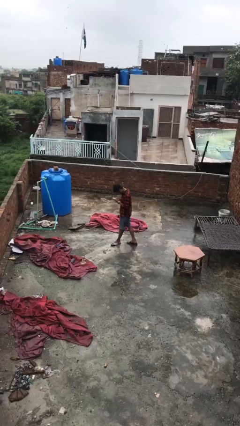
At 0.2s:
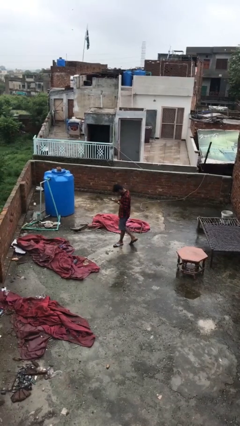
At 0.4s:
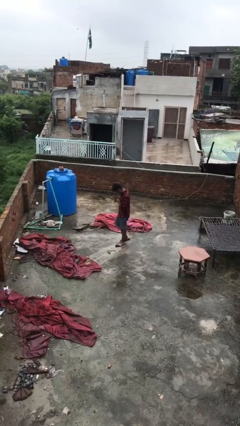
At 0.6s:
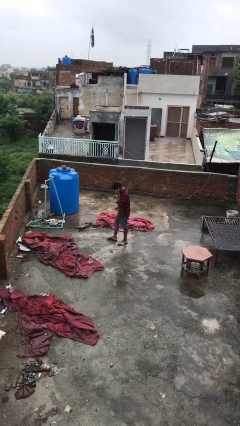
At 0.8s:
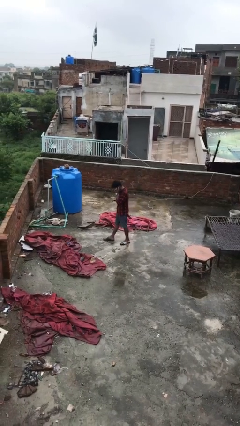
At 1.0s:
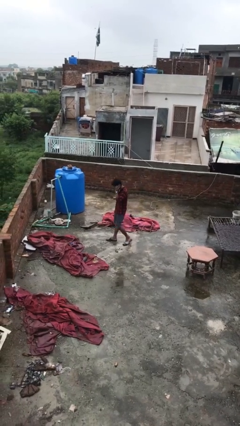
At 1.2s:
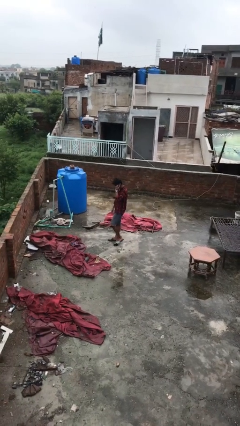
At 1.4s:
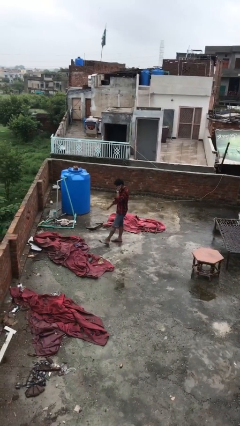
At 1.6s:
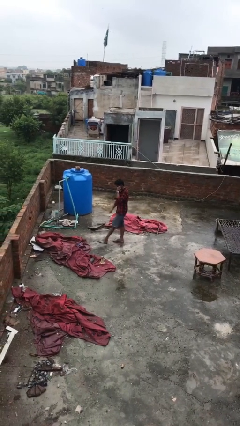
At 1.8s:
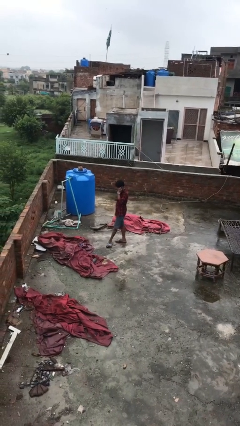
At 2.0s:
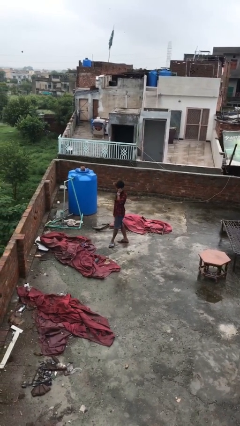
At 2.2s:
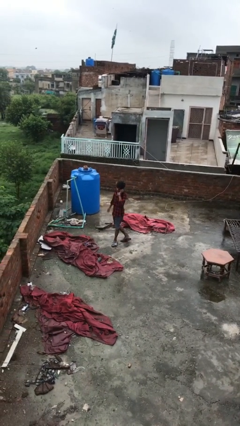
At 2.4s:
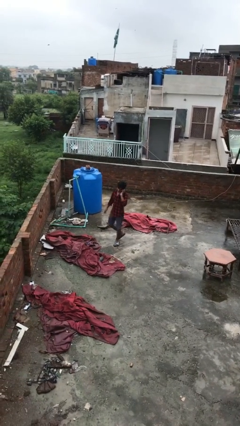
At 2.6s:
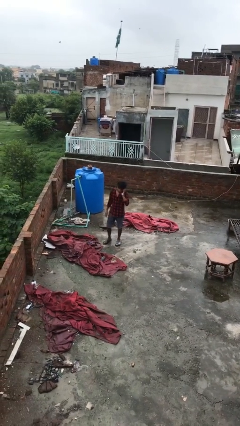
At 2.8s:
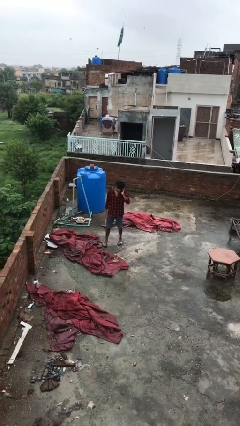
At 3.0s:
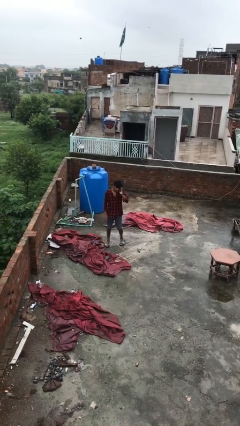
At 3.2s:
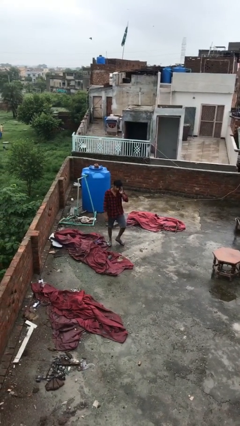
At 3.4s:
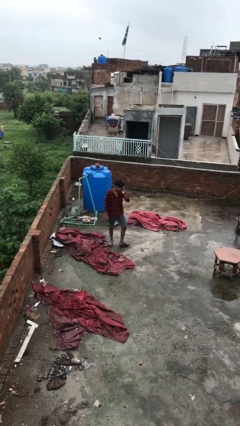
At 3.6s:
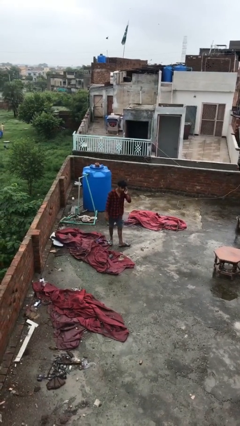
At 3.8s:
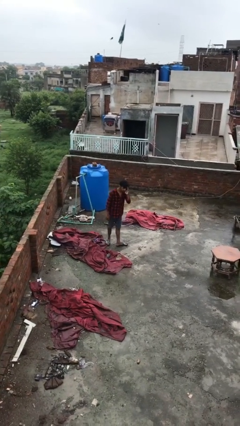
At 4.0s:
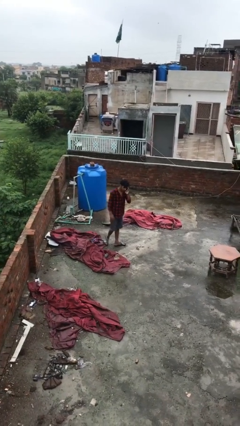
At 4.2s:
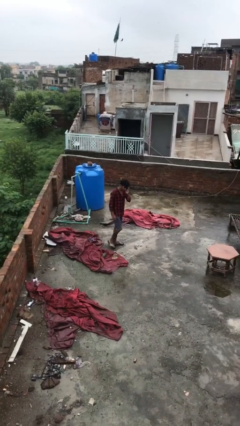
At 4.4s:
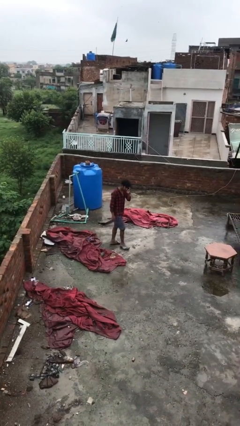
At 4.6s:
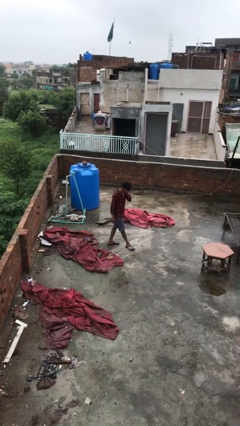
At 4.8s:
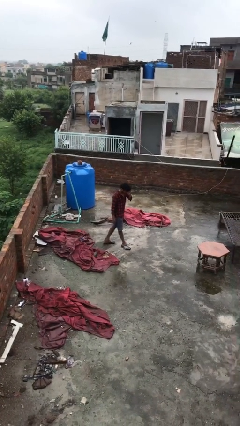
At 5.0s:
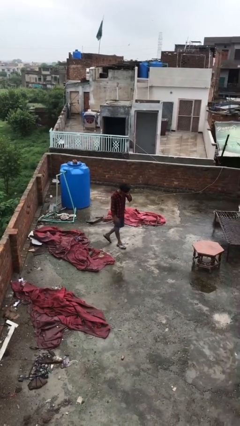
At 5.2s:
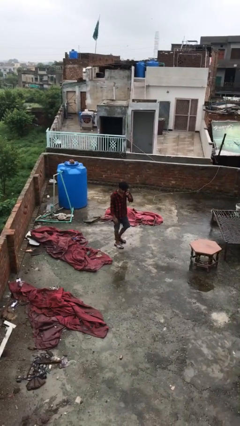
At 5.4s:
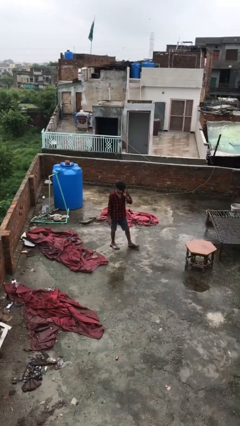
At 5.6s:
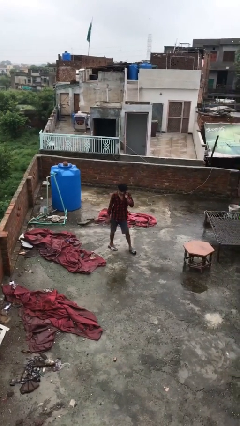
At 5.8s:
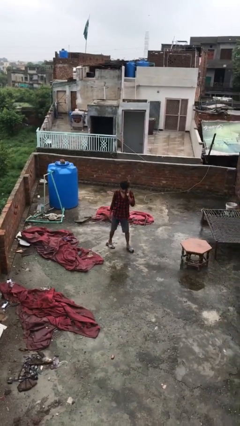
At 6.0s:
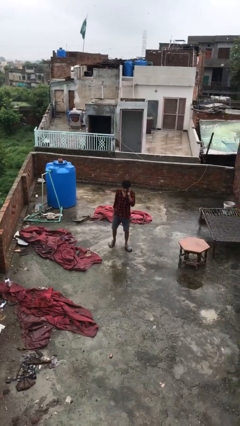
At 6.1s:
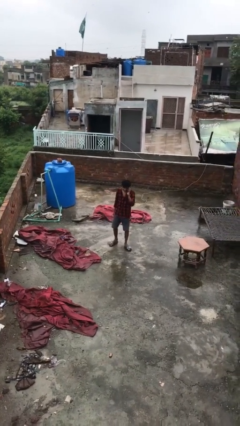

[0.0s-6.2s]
person talks on phone

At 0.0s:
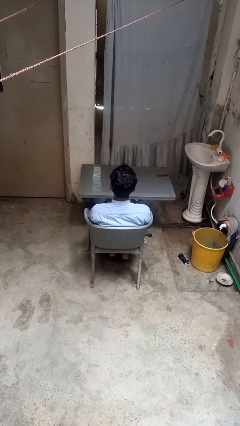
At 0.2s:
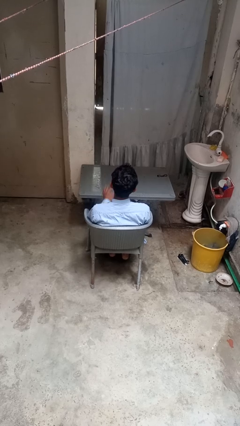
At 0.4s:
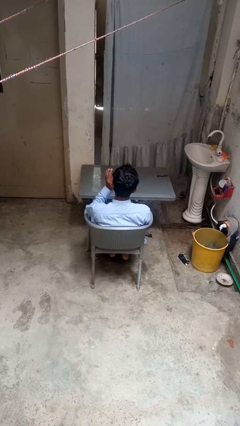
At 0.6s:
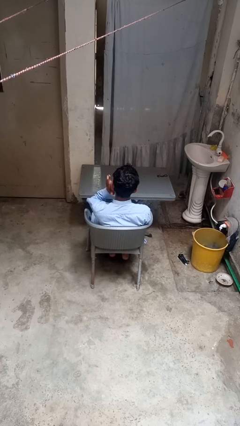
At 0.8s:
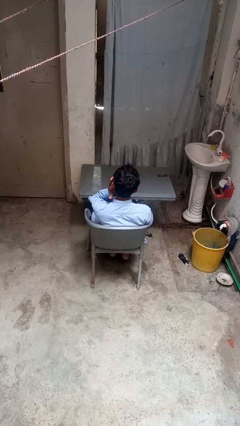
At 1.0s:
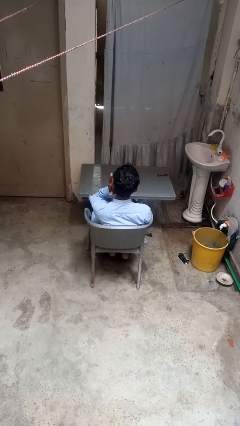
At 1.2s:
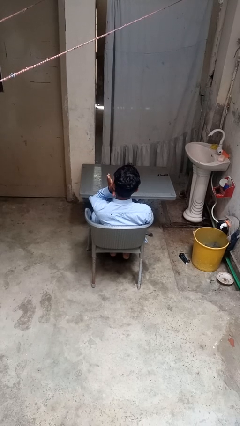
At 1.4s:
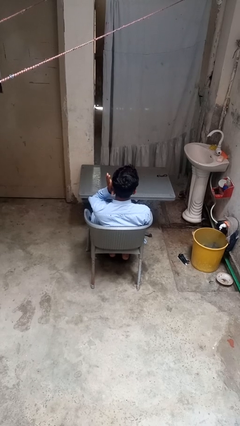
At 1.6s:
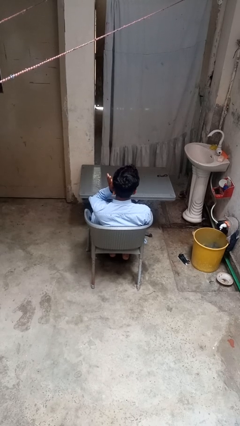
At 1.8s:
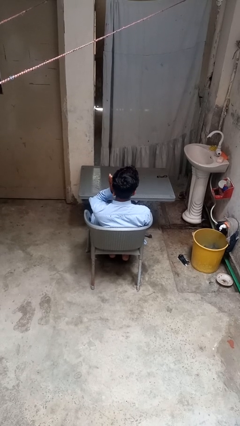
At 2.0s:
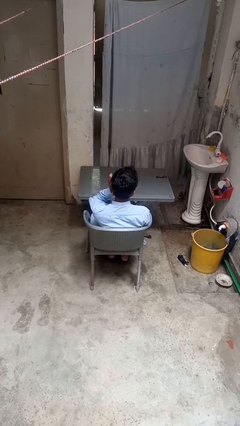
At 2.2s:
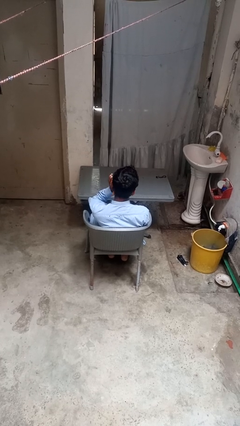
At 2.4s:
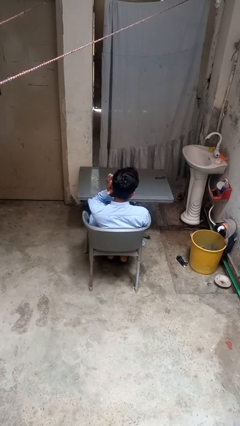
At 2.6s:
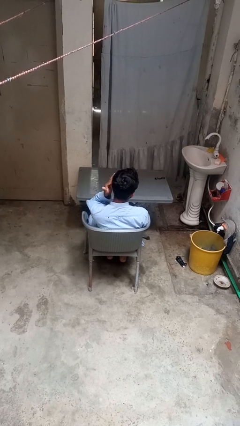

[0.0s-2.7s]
person puts fingers in ear

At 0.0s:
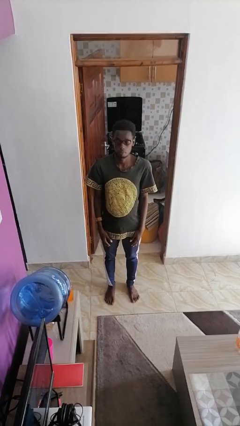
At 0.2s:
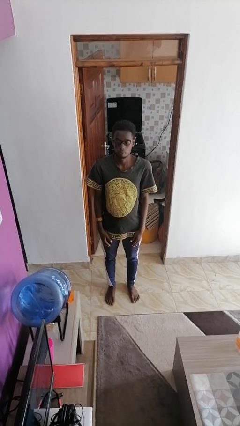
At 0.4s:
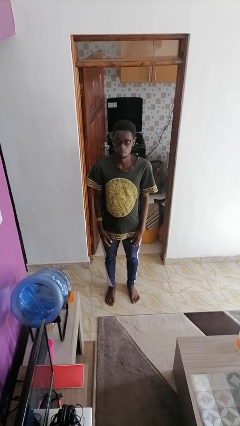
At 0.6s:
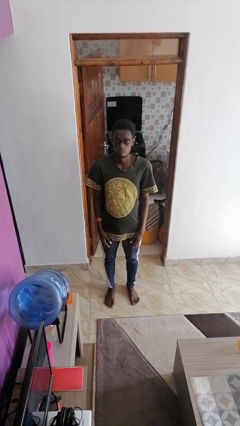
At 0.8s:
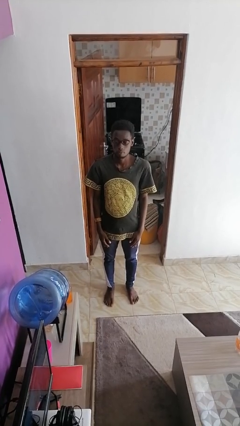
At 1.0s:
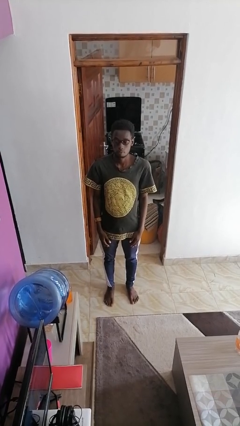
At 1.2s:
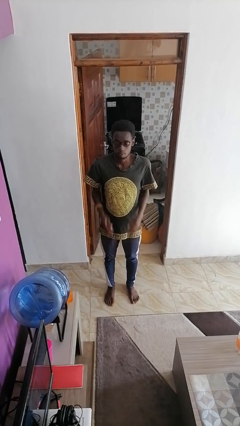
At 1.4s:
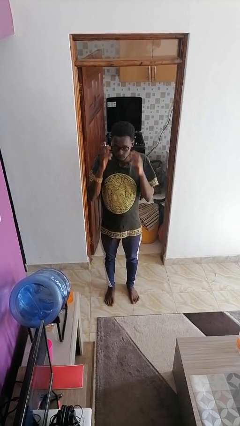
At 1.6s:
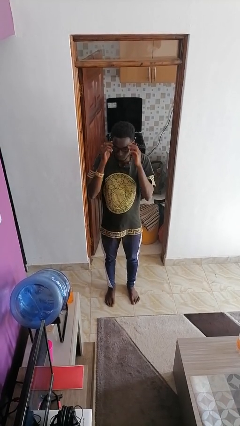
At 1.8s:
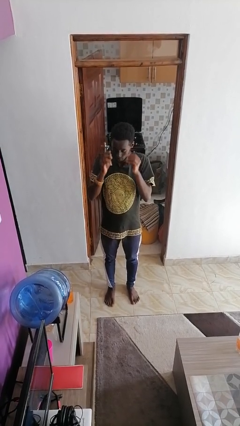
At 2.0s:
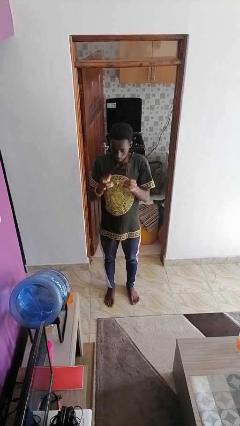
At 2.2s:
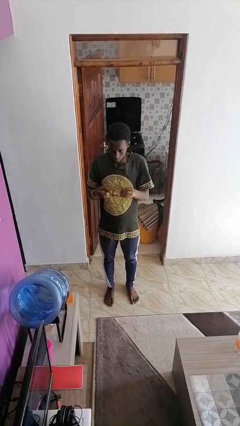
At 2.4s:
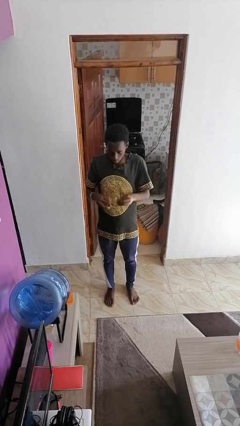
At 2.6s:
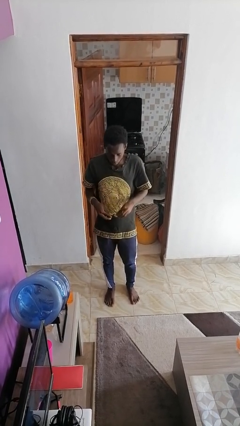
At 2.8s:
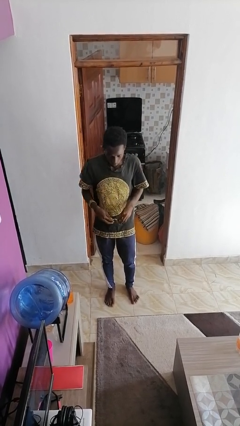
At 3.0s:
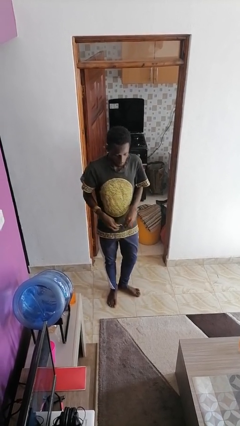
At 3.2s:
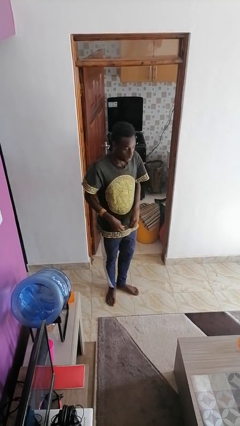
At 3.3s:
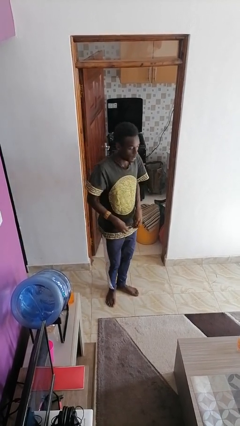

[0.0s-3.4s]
person takes off glasses

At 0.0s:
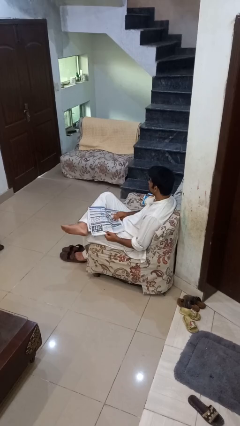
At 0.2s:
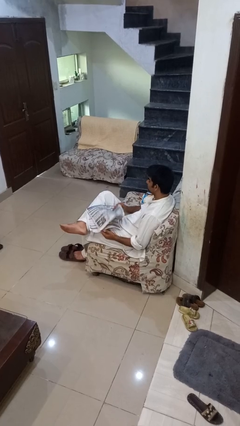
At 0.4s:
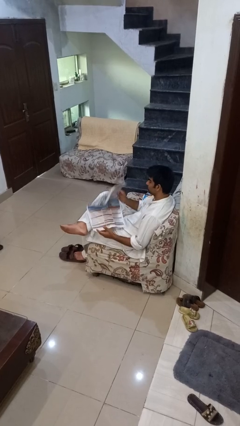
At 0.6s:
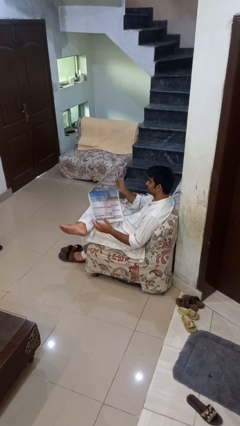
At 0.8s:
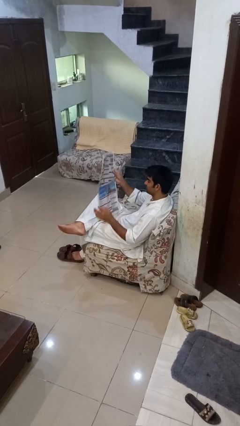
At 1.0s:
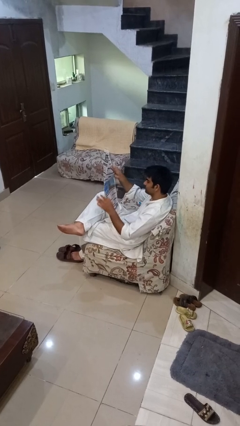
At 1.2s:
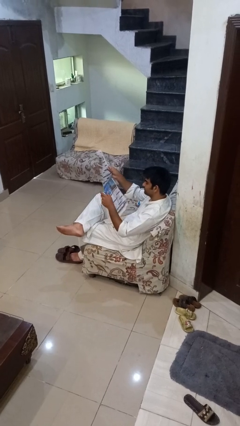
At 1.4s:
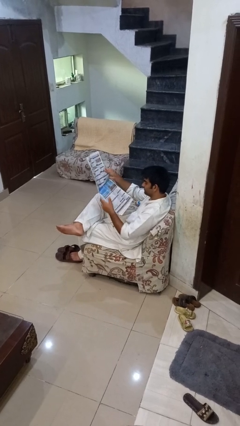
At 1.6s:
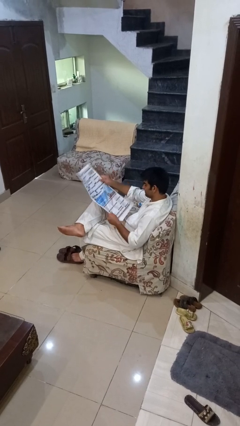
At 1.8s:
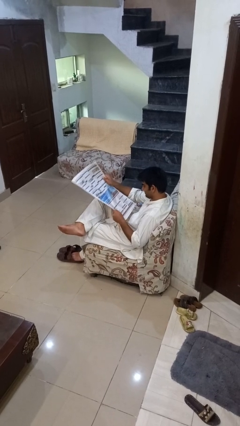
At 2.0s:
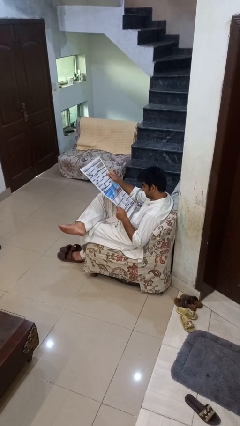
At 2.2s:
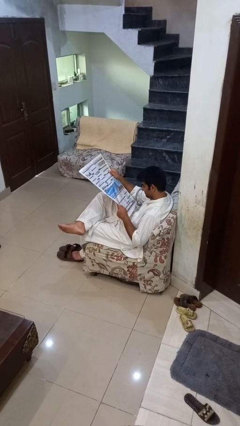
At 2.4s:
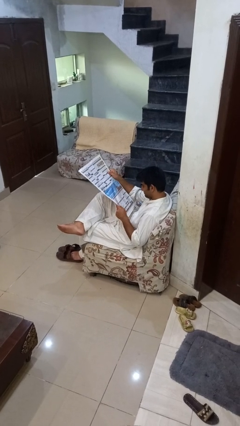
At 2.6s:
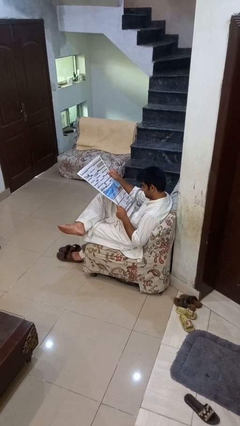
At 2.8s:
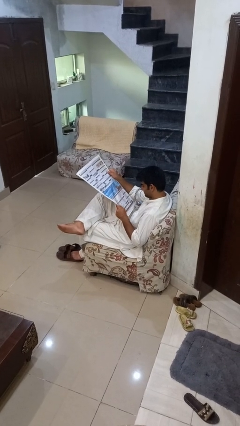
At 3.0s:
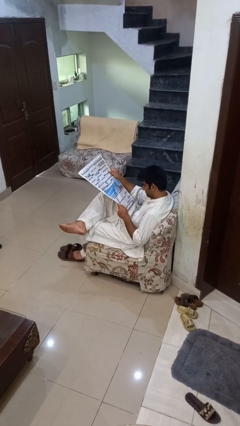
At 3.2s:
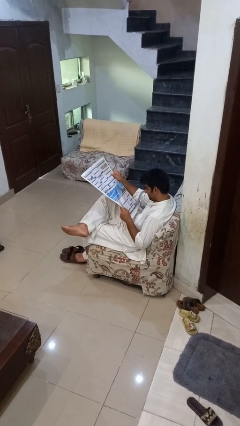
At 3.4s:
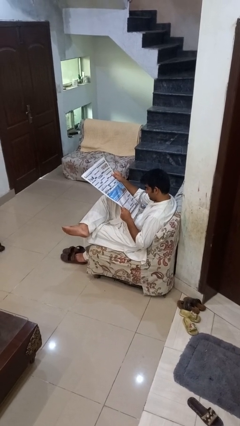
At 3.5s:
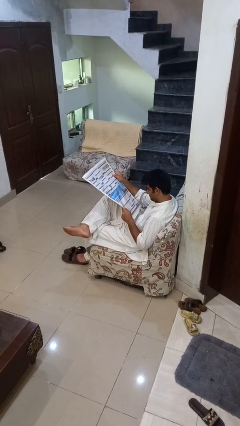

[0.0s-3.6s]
person reads newspaper

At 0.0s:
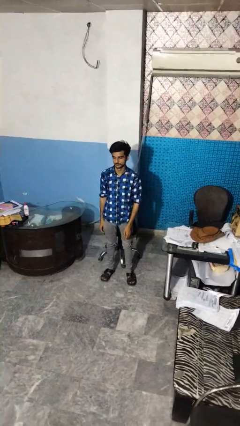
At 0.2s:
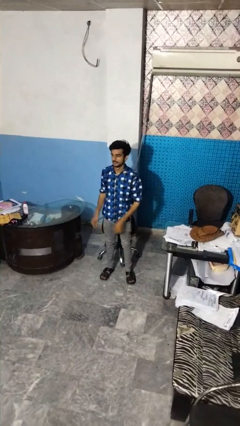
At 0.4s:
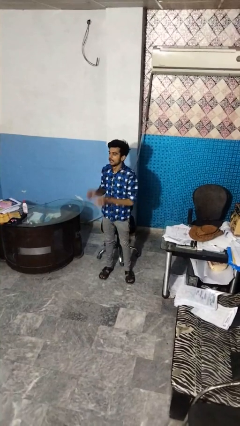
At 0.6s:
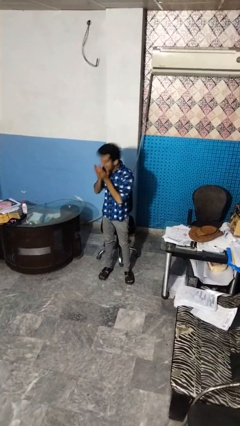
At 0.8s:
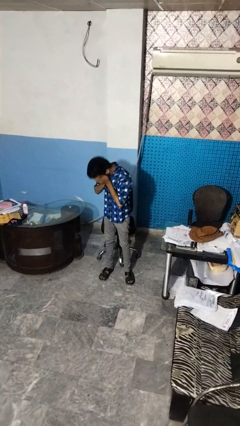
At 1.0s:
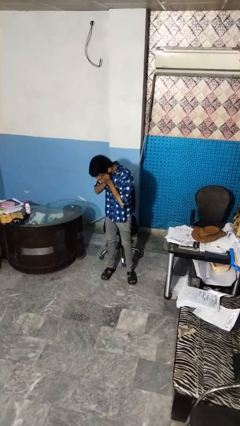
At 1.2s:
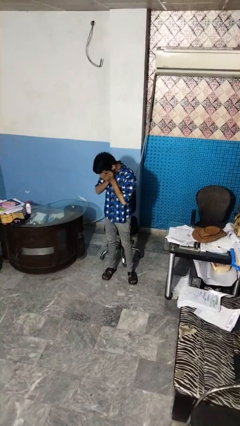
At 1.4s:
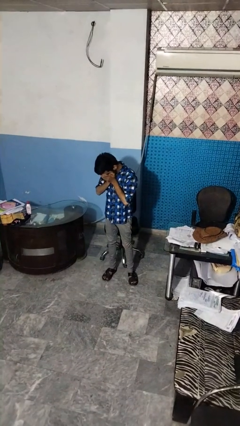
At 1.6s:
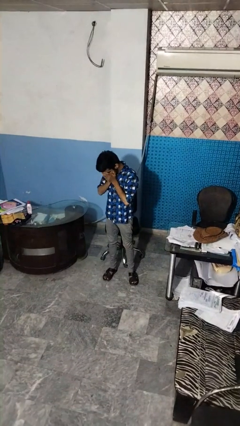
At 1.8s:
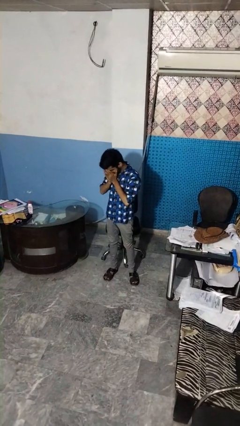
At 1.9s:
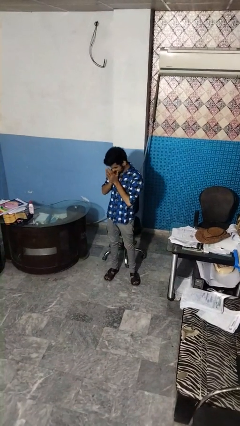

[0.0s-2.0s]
person sneezes into hand

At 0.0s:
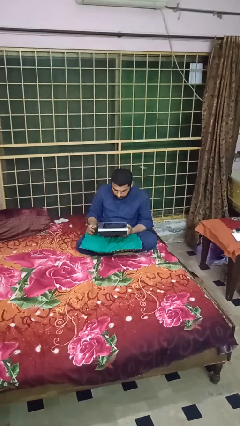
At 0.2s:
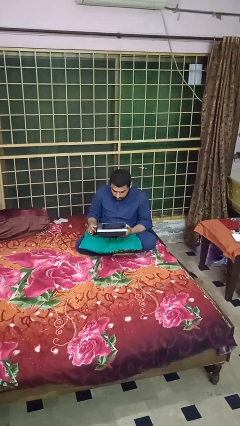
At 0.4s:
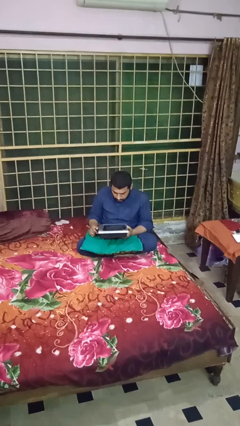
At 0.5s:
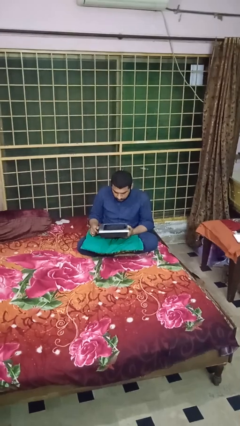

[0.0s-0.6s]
person interacts with tablet
